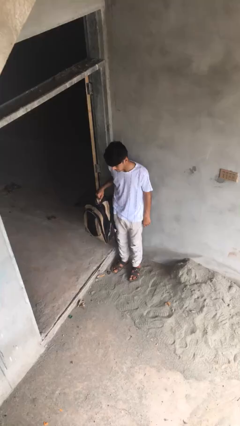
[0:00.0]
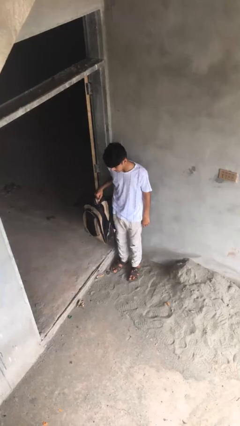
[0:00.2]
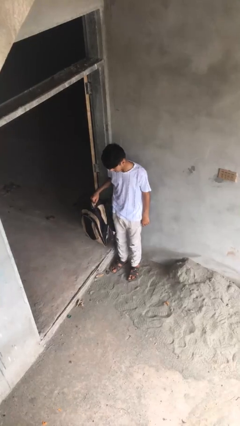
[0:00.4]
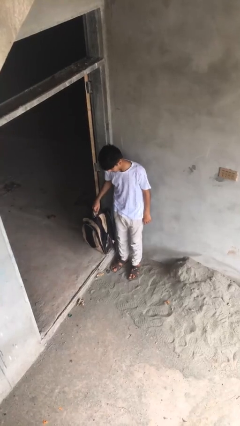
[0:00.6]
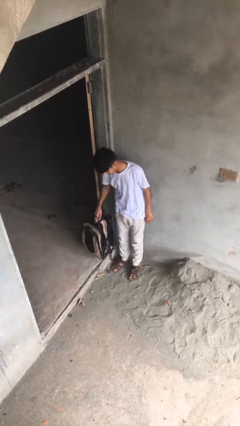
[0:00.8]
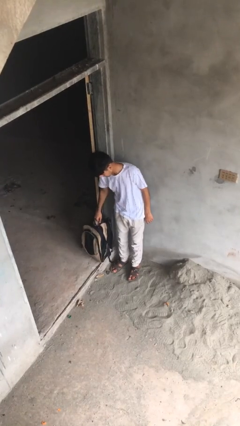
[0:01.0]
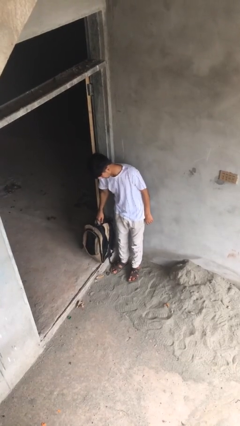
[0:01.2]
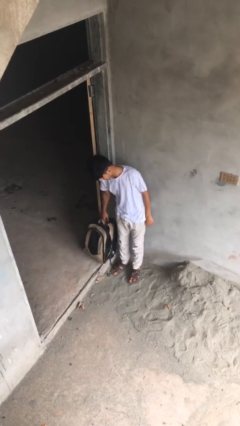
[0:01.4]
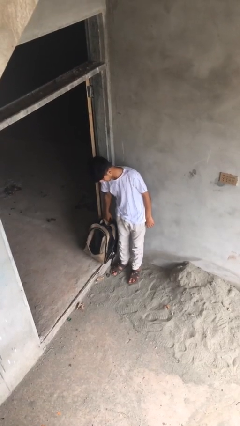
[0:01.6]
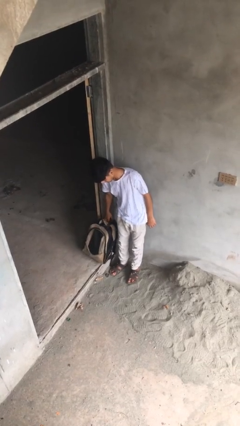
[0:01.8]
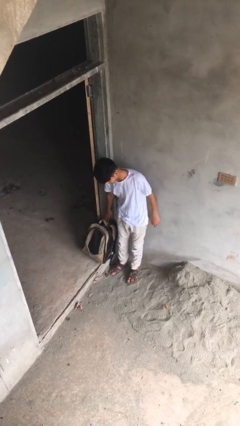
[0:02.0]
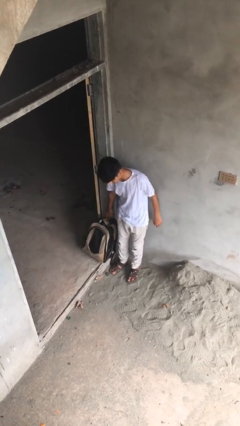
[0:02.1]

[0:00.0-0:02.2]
person puts down object on floor

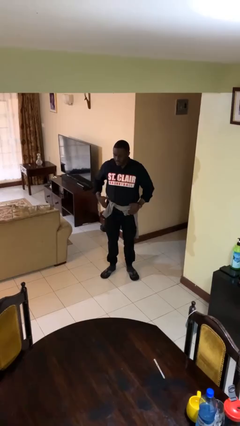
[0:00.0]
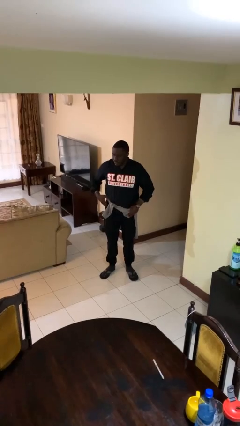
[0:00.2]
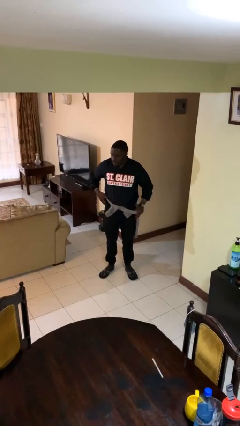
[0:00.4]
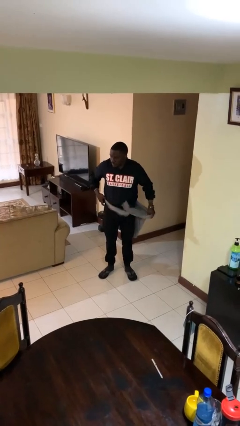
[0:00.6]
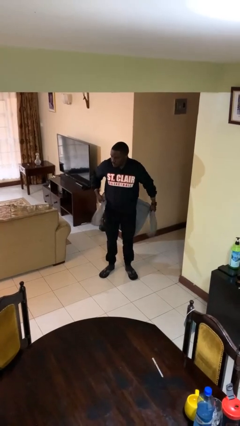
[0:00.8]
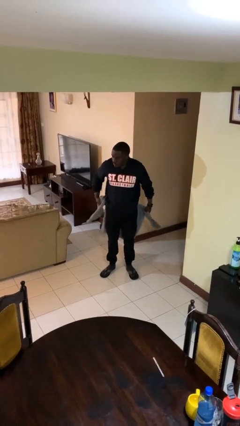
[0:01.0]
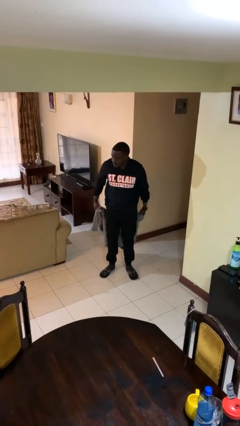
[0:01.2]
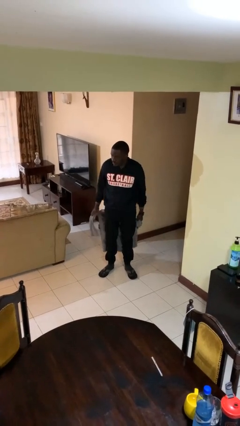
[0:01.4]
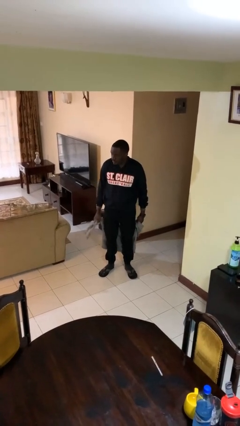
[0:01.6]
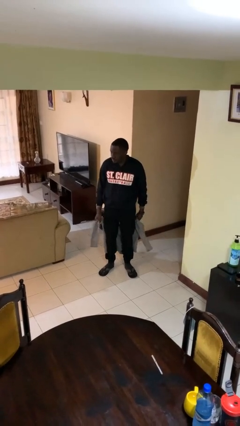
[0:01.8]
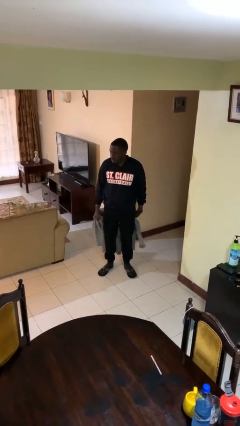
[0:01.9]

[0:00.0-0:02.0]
person unties jacket around waist

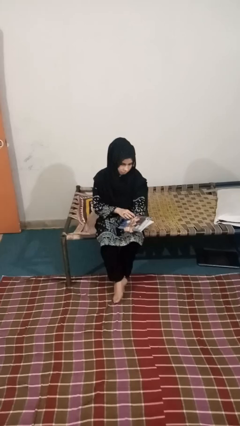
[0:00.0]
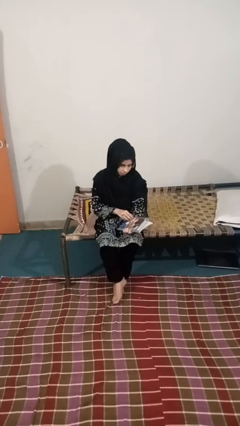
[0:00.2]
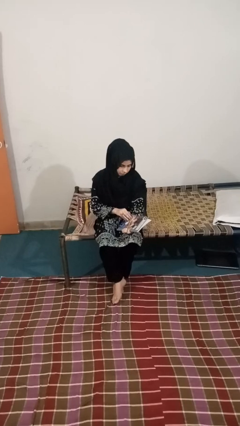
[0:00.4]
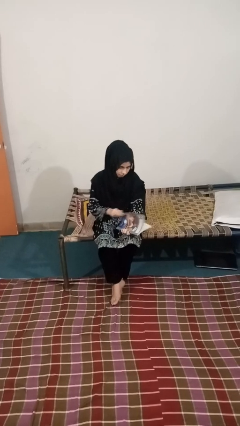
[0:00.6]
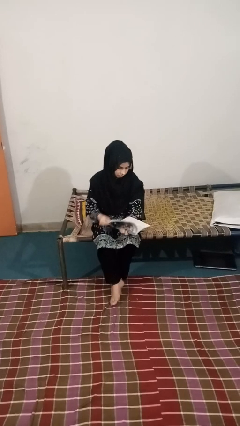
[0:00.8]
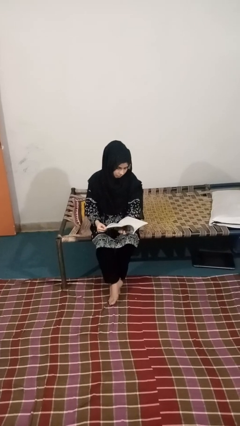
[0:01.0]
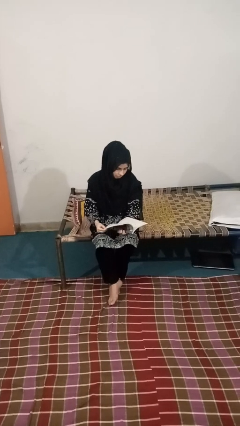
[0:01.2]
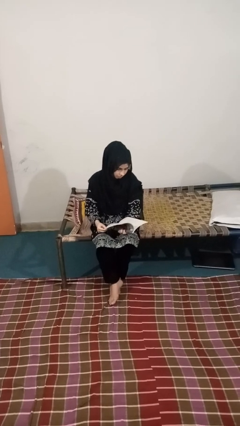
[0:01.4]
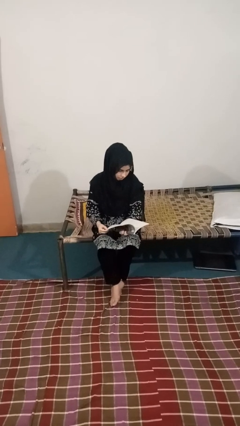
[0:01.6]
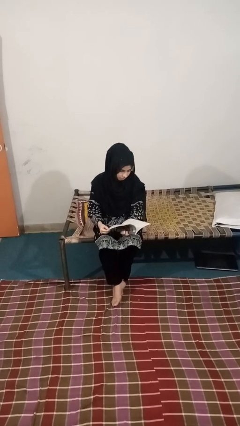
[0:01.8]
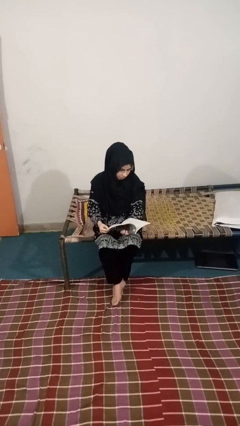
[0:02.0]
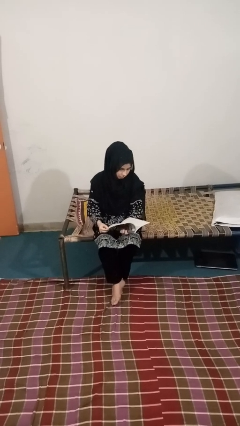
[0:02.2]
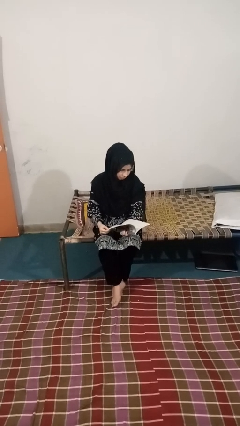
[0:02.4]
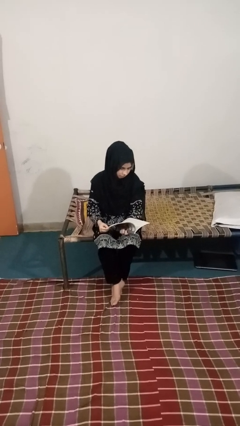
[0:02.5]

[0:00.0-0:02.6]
person reads book

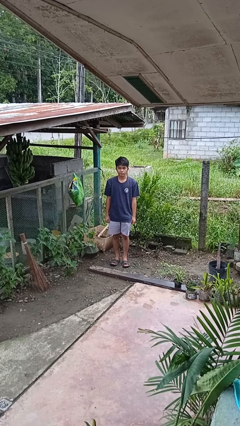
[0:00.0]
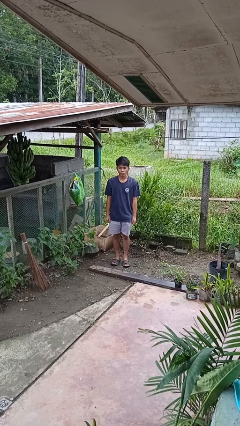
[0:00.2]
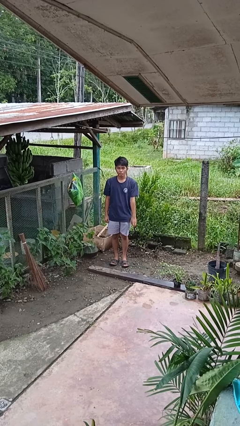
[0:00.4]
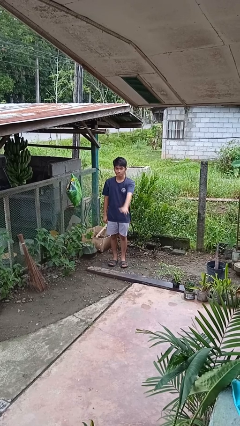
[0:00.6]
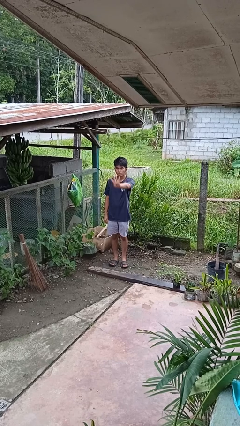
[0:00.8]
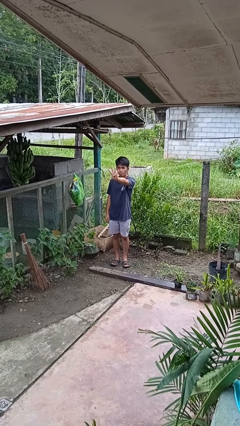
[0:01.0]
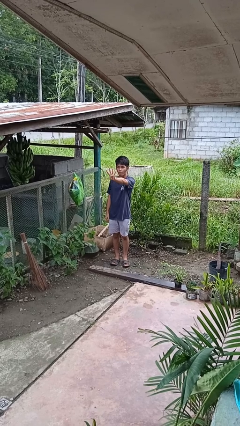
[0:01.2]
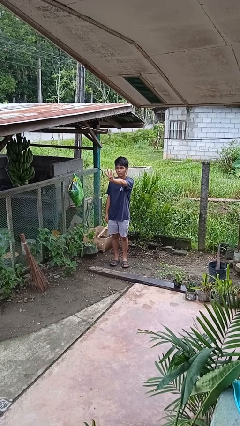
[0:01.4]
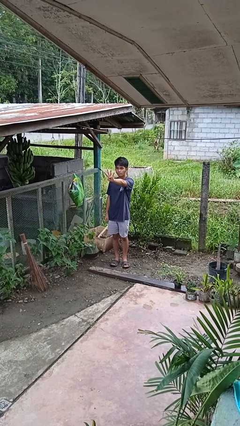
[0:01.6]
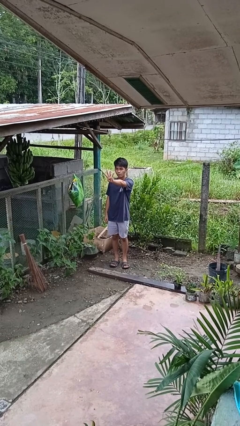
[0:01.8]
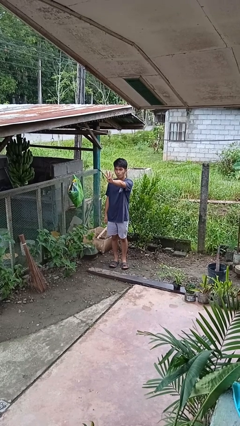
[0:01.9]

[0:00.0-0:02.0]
person gestures number four

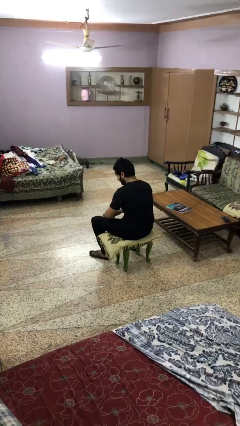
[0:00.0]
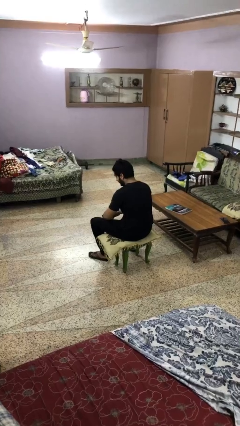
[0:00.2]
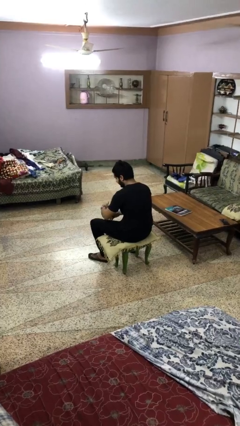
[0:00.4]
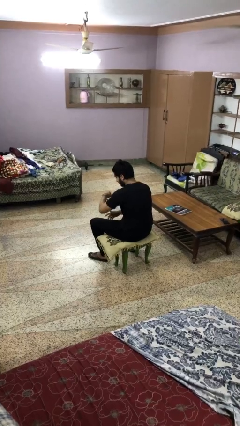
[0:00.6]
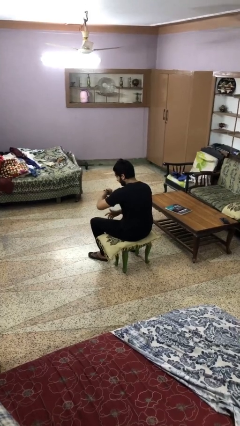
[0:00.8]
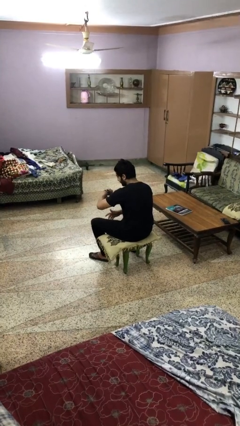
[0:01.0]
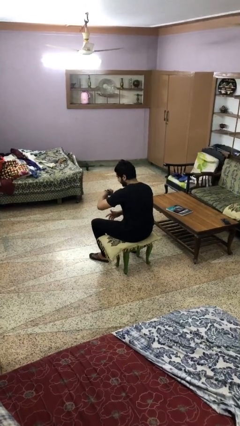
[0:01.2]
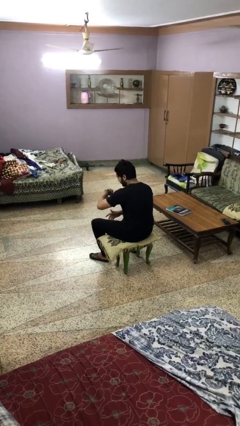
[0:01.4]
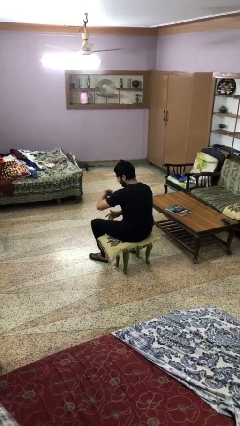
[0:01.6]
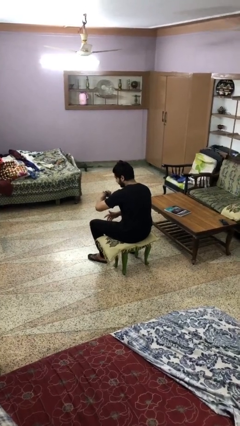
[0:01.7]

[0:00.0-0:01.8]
person looks at wristwatch

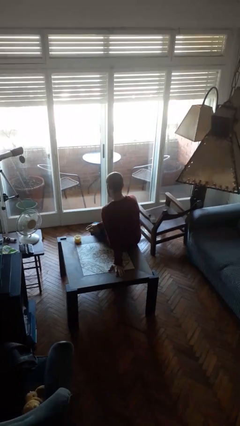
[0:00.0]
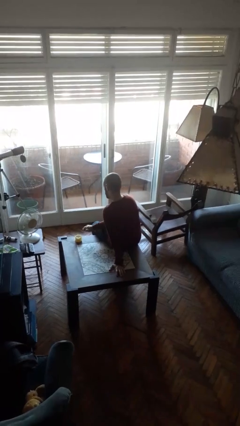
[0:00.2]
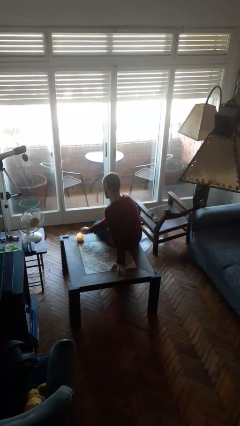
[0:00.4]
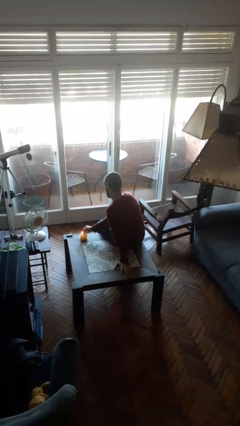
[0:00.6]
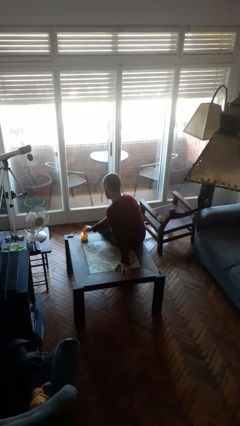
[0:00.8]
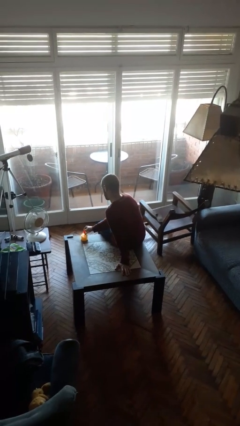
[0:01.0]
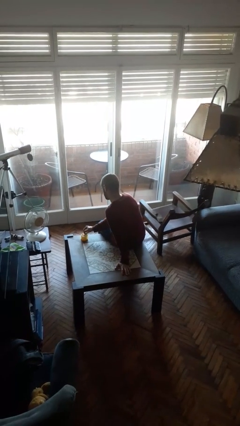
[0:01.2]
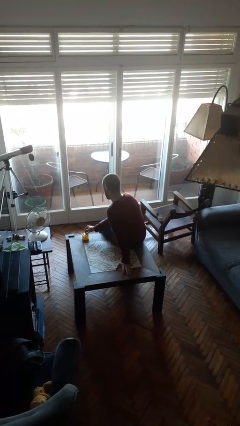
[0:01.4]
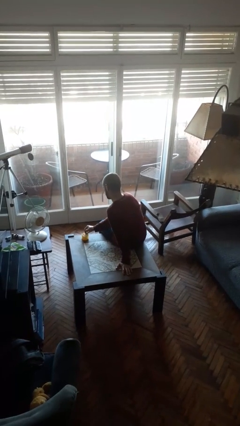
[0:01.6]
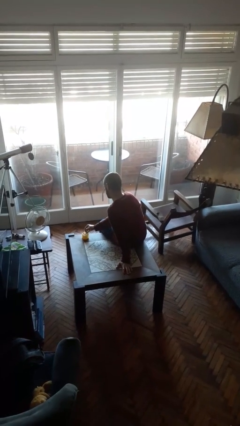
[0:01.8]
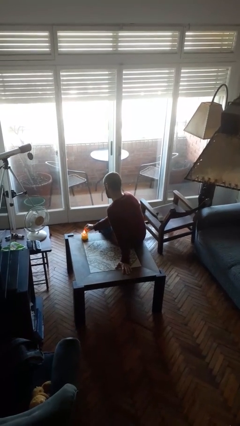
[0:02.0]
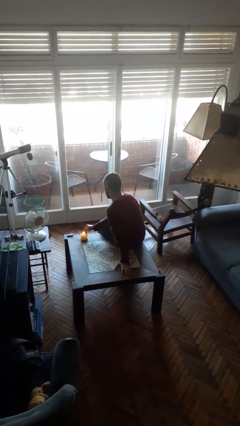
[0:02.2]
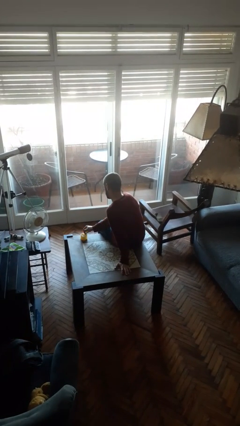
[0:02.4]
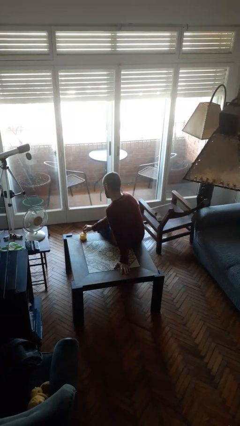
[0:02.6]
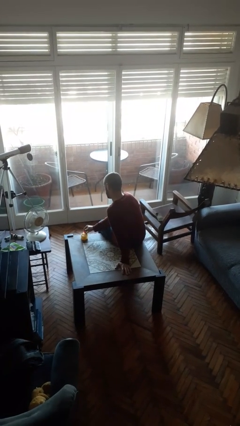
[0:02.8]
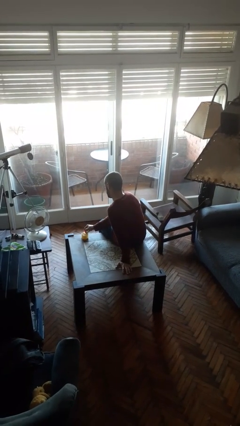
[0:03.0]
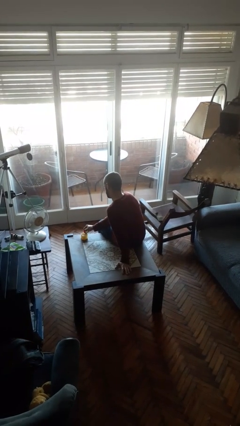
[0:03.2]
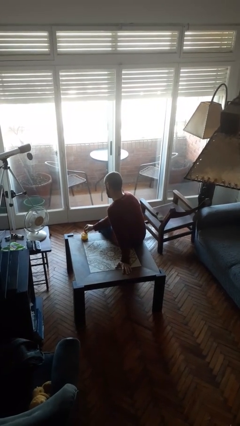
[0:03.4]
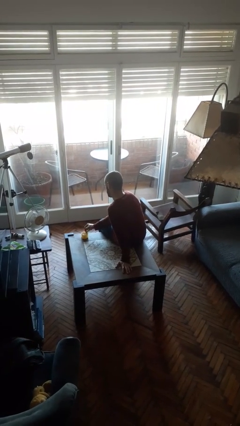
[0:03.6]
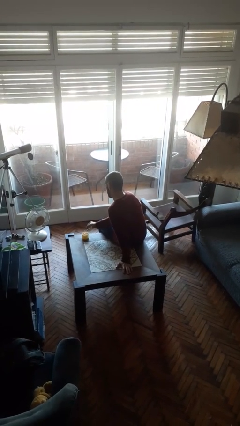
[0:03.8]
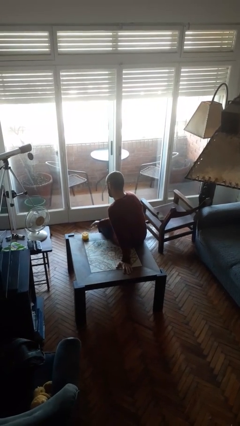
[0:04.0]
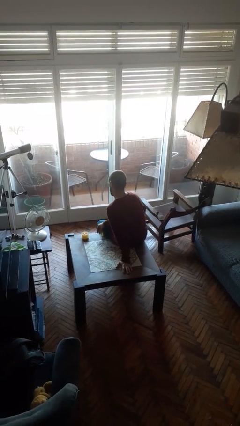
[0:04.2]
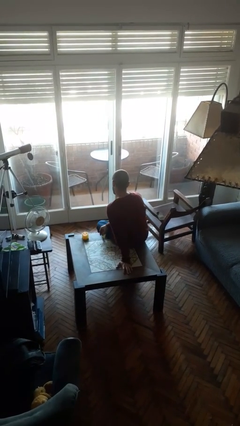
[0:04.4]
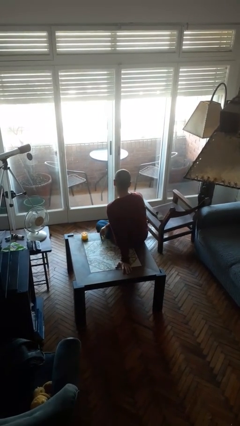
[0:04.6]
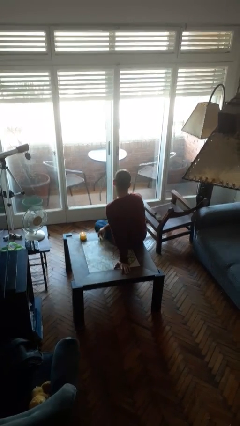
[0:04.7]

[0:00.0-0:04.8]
person lights candle

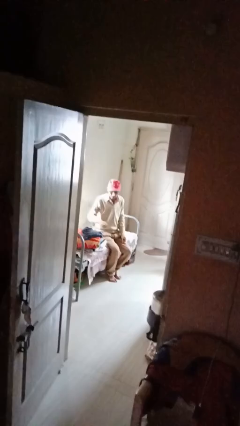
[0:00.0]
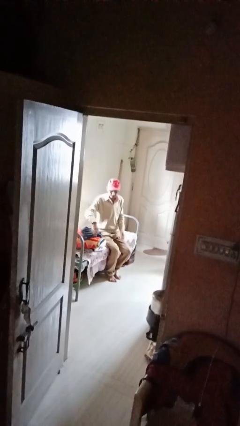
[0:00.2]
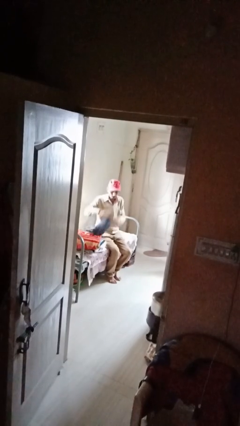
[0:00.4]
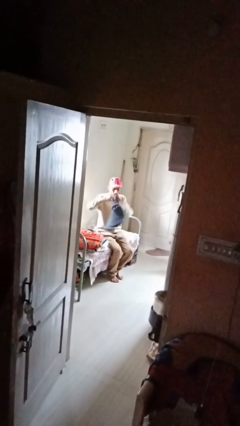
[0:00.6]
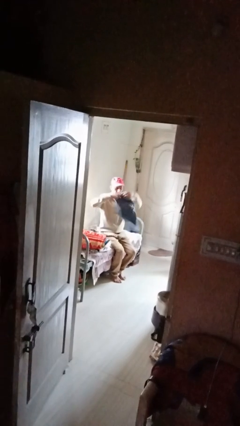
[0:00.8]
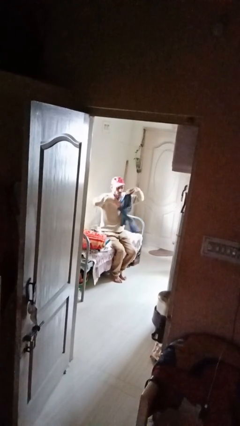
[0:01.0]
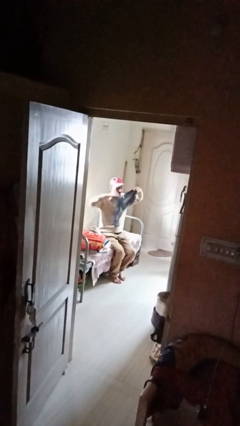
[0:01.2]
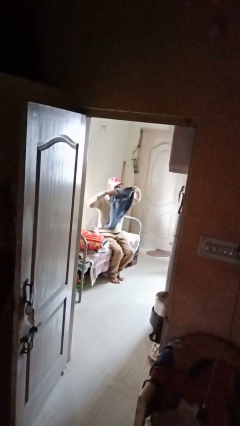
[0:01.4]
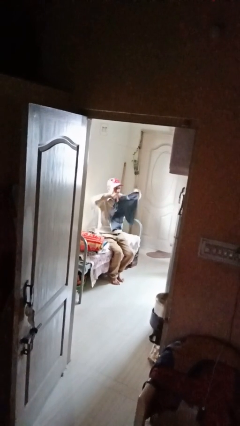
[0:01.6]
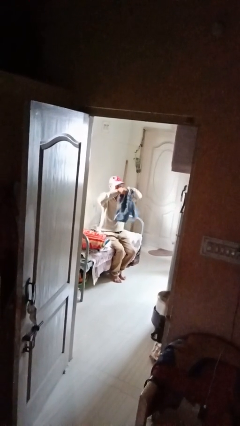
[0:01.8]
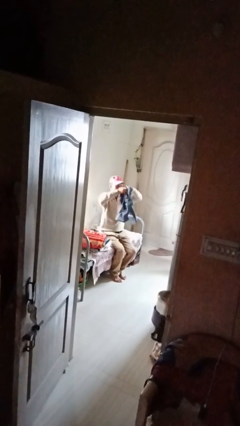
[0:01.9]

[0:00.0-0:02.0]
person folds pants
